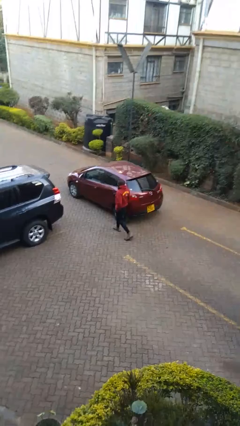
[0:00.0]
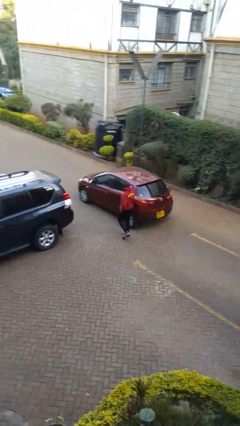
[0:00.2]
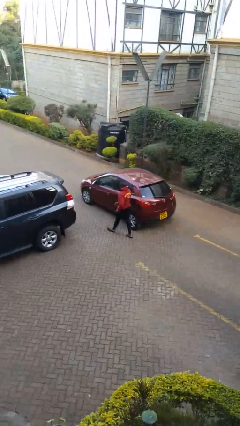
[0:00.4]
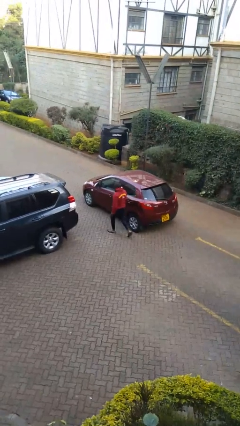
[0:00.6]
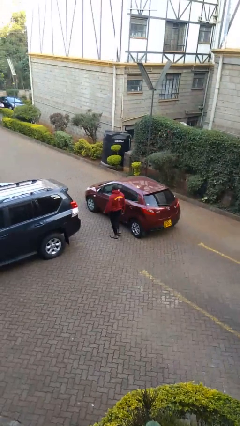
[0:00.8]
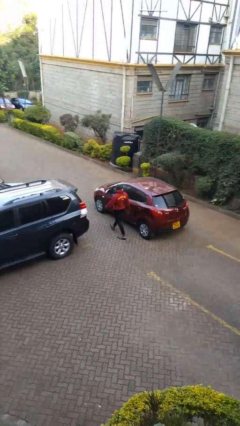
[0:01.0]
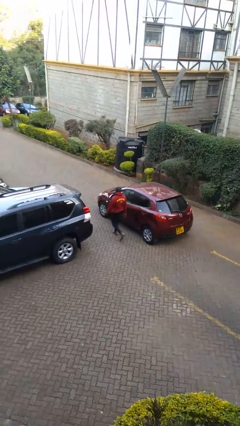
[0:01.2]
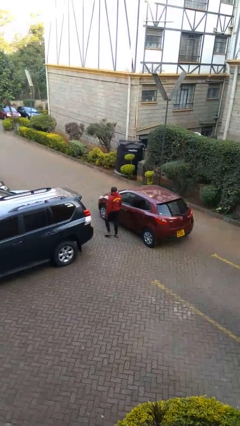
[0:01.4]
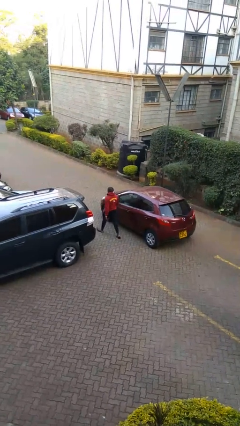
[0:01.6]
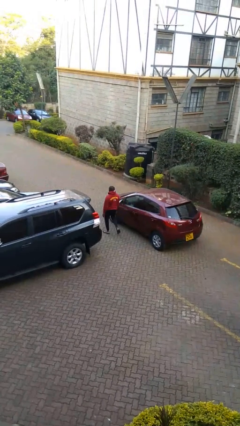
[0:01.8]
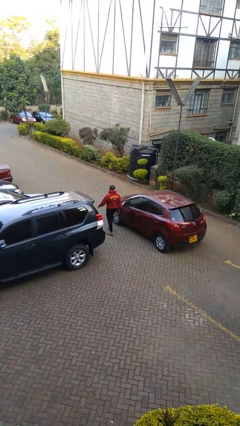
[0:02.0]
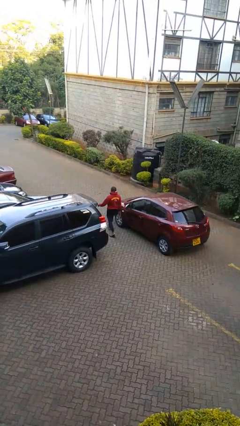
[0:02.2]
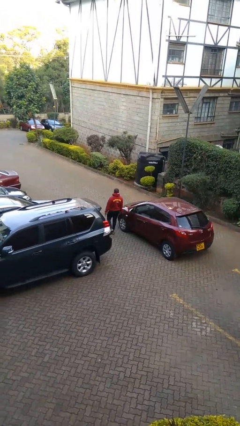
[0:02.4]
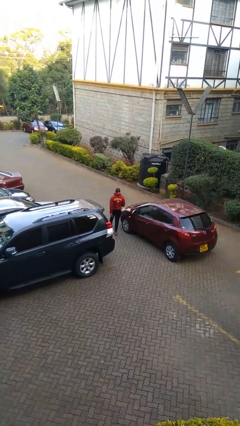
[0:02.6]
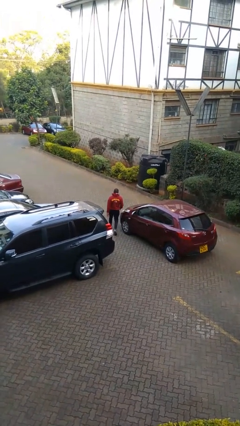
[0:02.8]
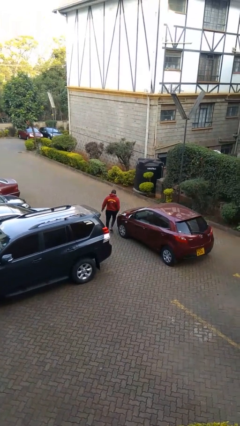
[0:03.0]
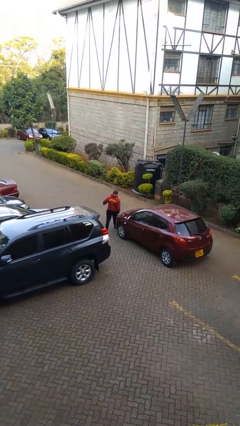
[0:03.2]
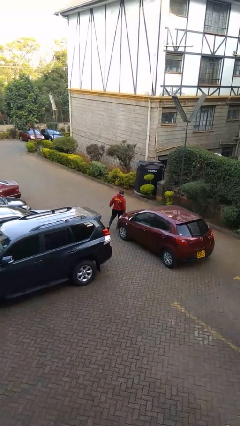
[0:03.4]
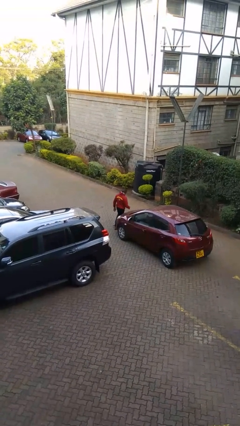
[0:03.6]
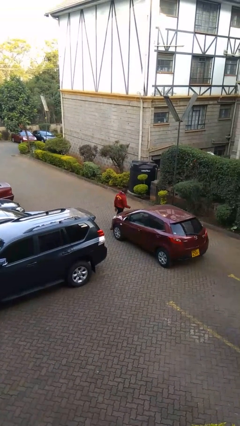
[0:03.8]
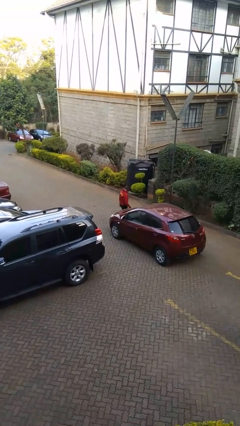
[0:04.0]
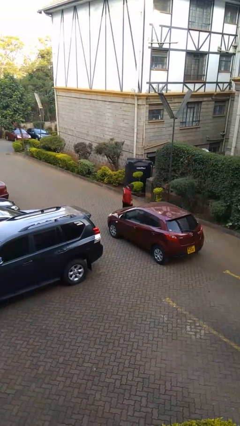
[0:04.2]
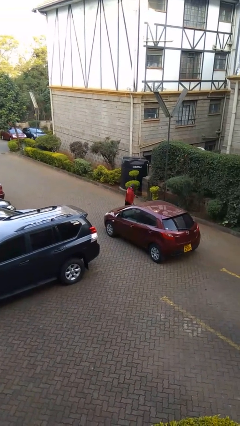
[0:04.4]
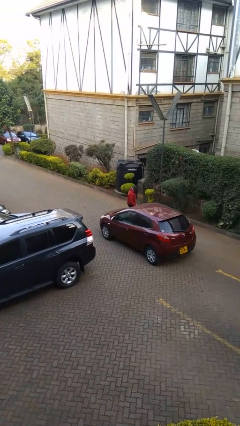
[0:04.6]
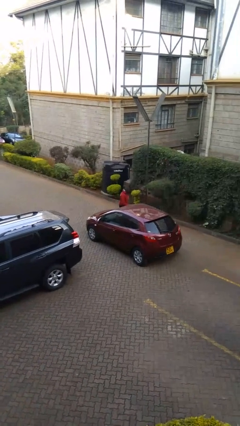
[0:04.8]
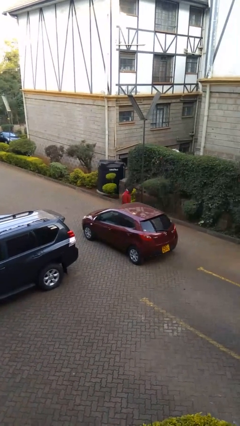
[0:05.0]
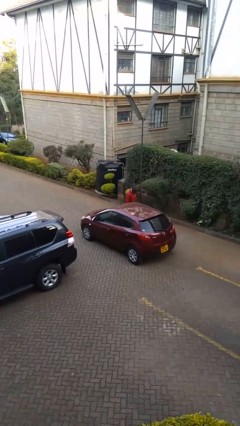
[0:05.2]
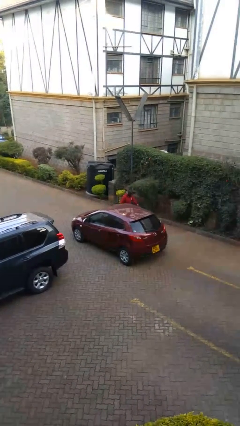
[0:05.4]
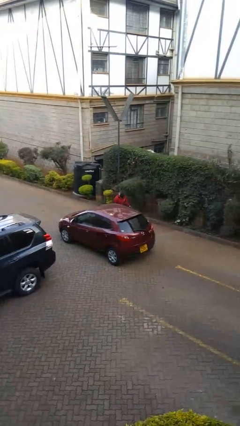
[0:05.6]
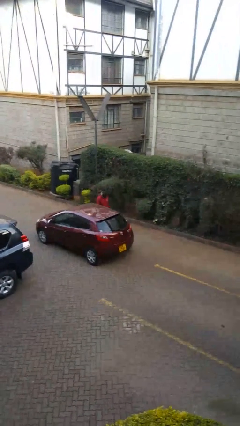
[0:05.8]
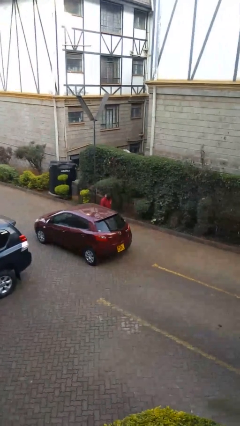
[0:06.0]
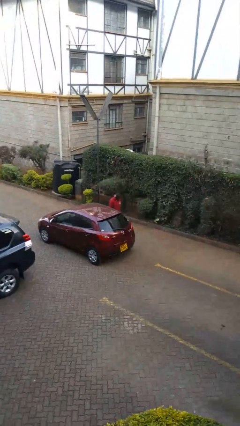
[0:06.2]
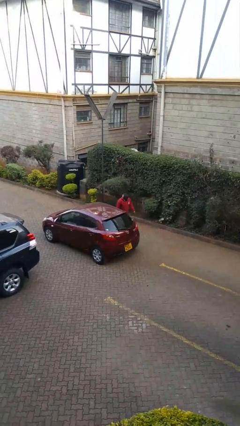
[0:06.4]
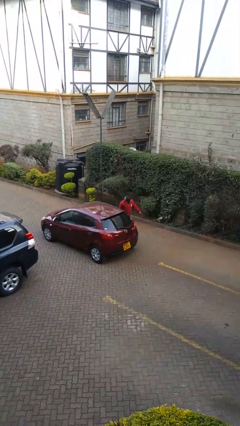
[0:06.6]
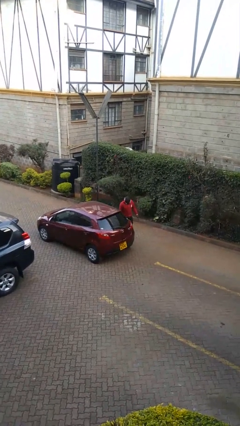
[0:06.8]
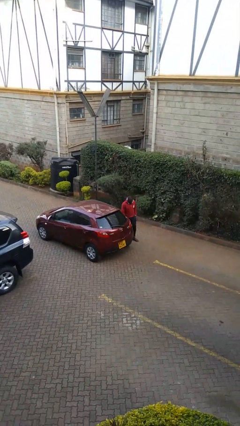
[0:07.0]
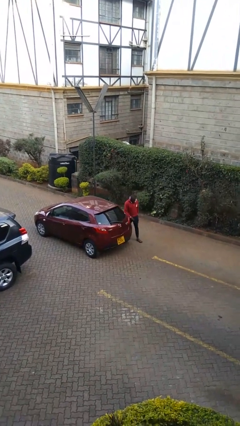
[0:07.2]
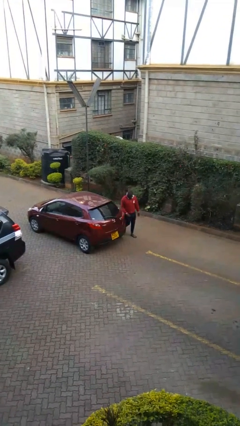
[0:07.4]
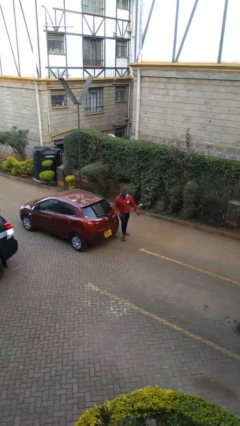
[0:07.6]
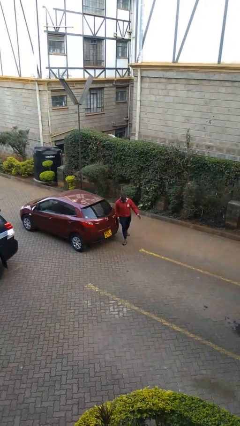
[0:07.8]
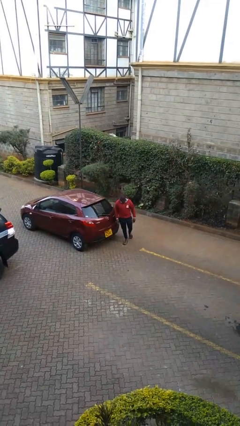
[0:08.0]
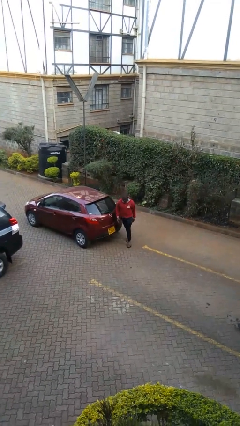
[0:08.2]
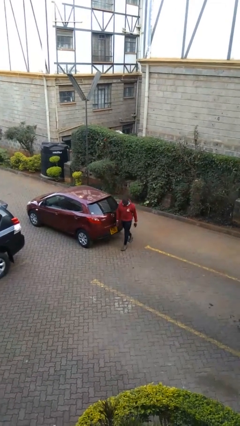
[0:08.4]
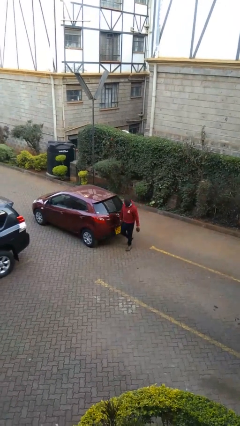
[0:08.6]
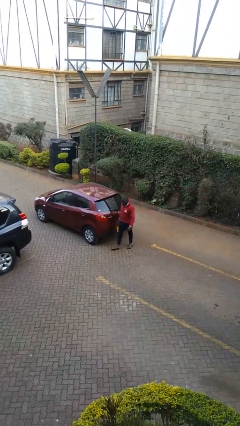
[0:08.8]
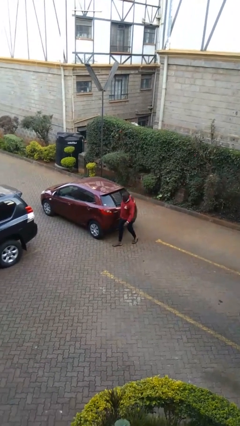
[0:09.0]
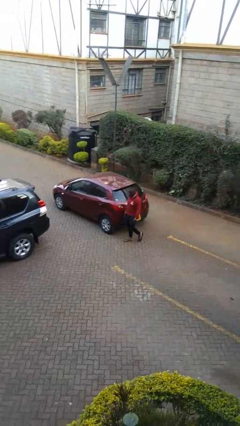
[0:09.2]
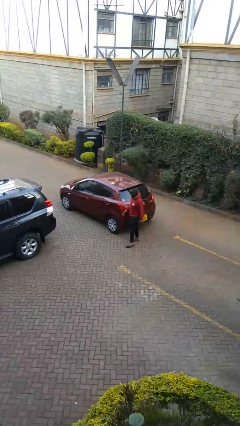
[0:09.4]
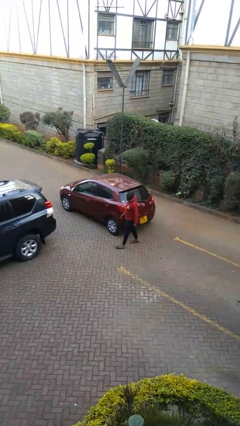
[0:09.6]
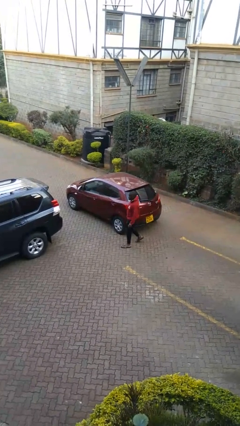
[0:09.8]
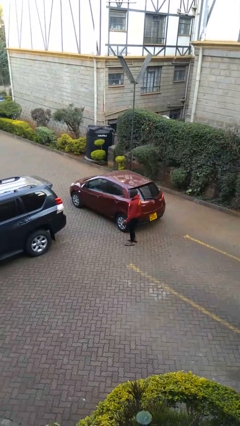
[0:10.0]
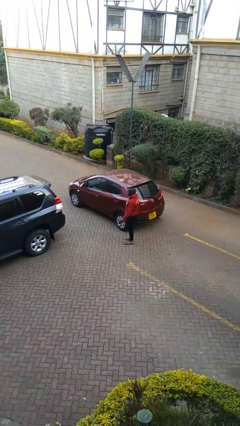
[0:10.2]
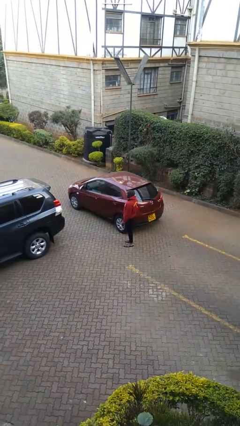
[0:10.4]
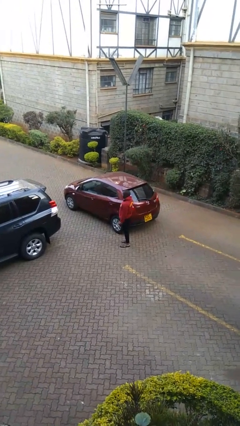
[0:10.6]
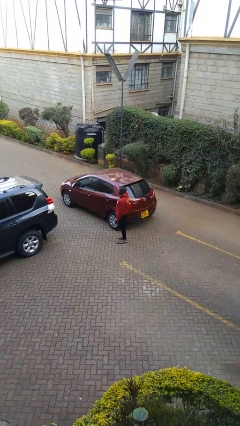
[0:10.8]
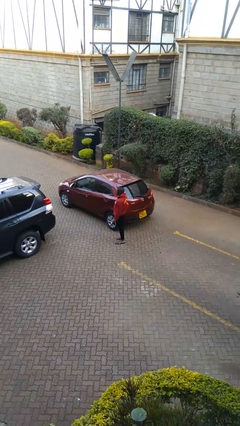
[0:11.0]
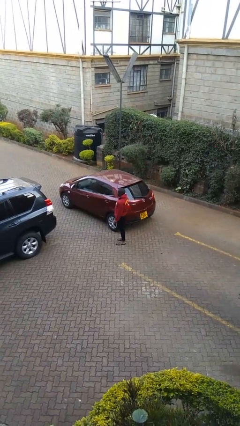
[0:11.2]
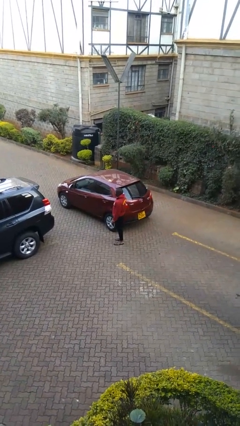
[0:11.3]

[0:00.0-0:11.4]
person walks around car

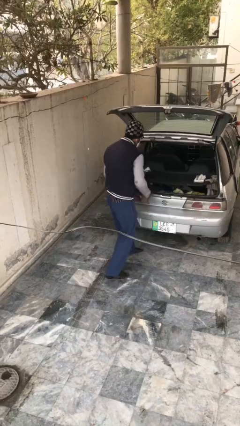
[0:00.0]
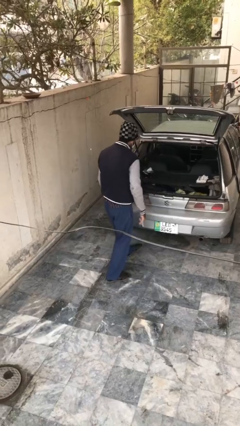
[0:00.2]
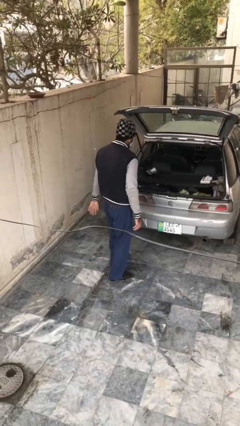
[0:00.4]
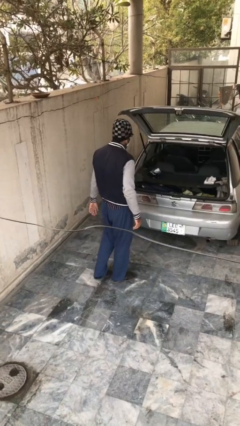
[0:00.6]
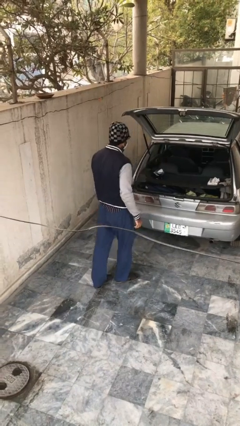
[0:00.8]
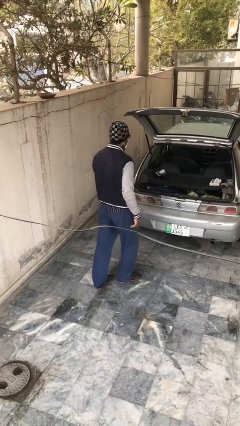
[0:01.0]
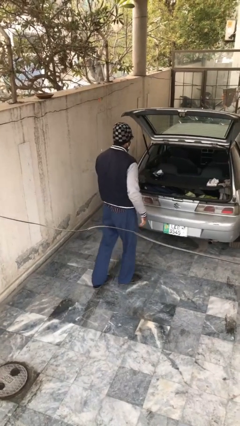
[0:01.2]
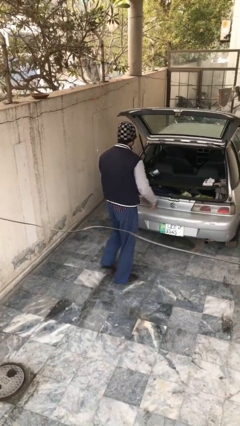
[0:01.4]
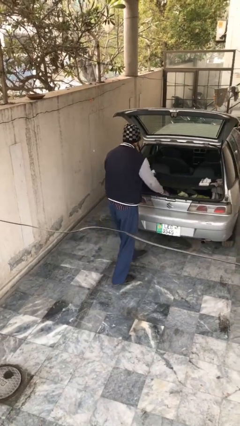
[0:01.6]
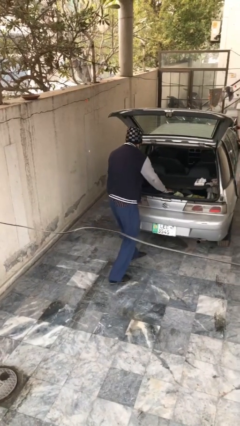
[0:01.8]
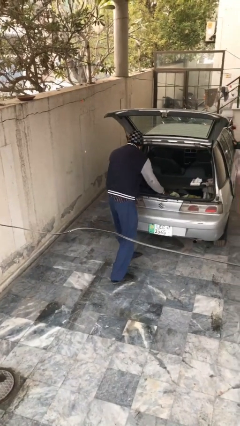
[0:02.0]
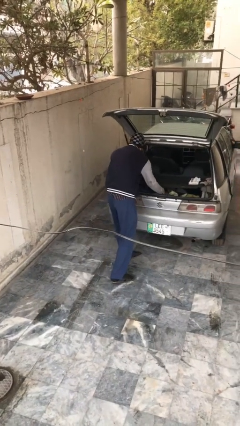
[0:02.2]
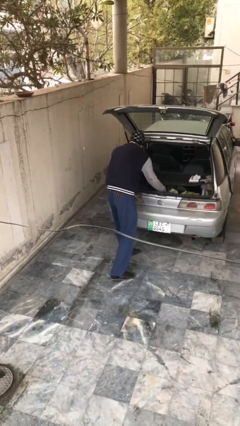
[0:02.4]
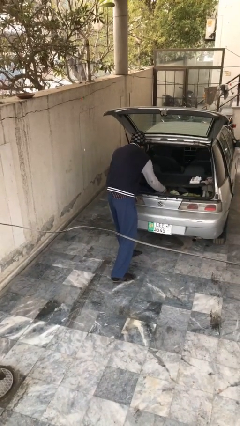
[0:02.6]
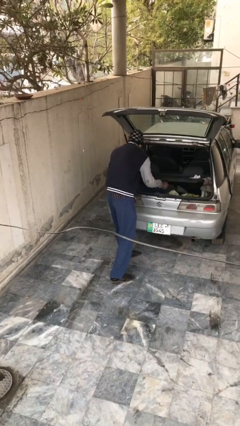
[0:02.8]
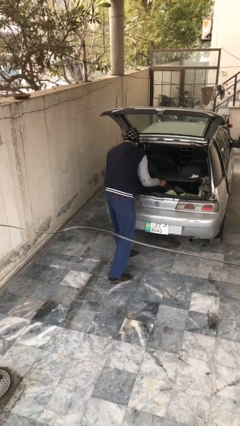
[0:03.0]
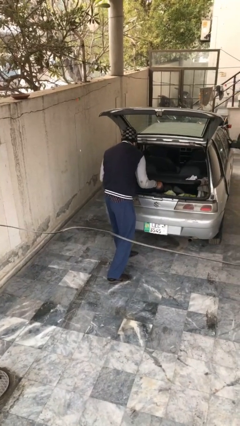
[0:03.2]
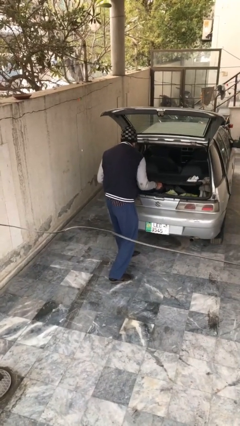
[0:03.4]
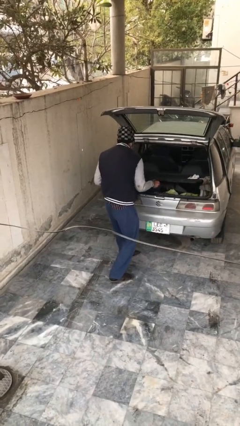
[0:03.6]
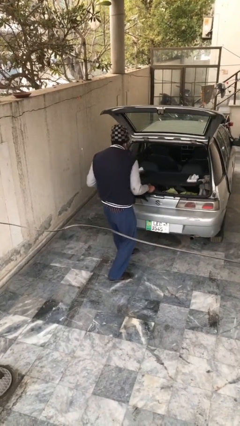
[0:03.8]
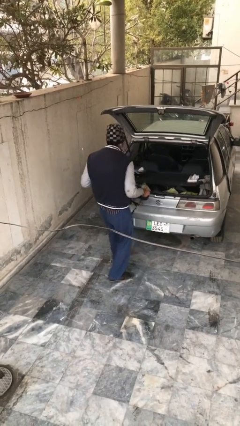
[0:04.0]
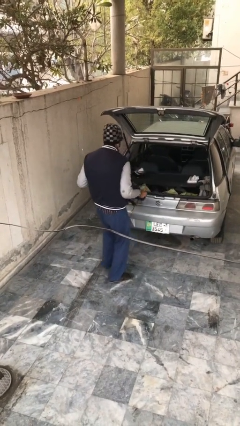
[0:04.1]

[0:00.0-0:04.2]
person unloads car

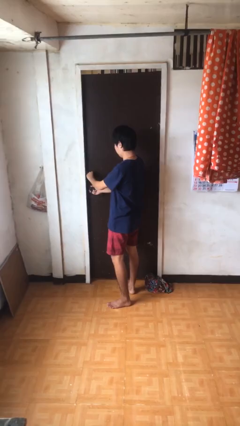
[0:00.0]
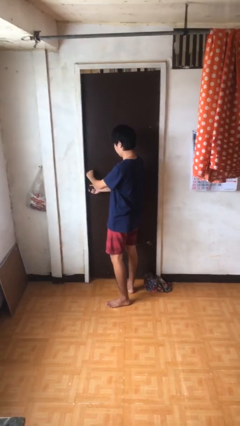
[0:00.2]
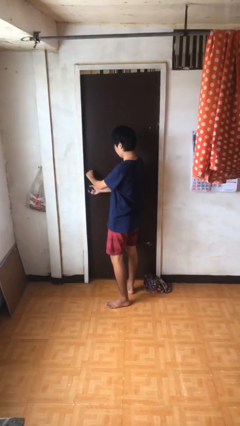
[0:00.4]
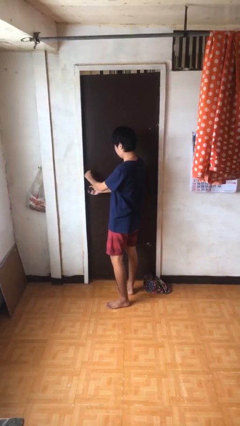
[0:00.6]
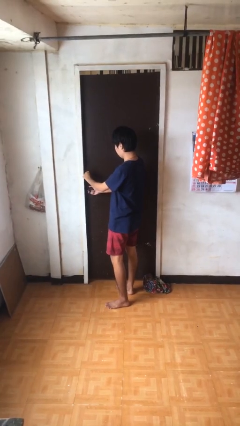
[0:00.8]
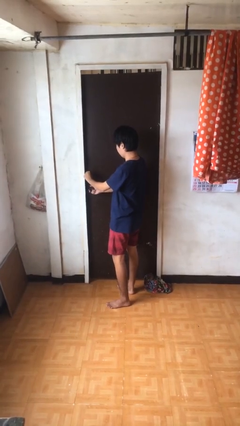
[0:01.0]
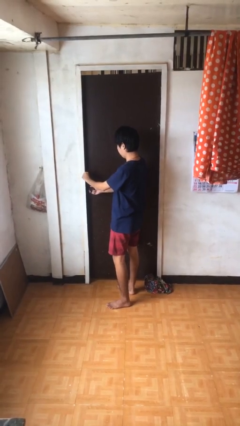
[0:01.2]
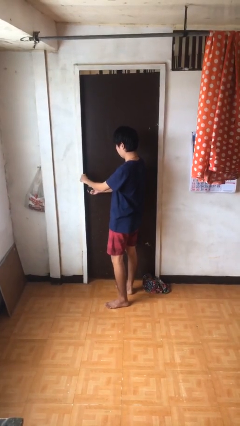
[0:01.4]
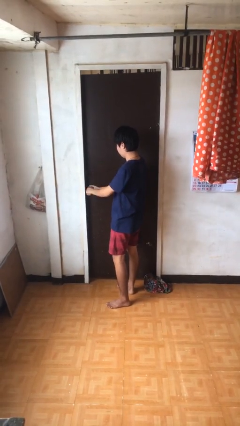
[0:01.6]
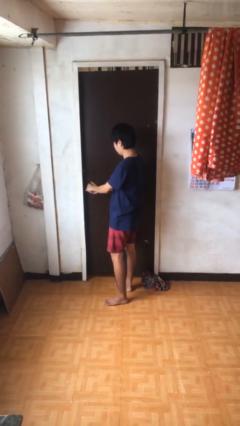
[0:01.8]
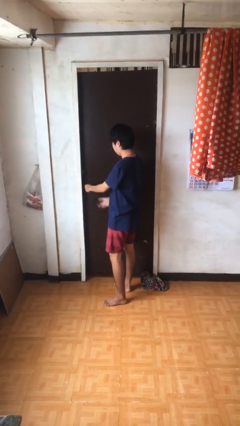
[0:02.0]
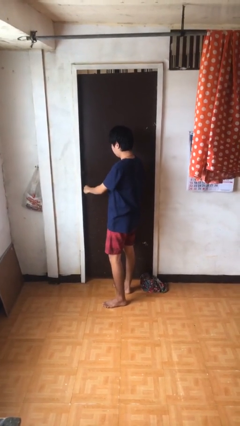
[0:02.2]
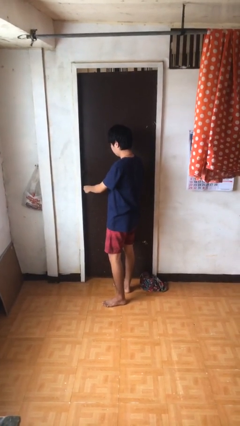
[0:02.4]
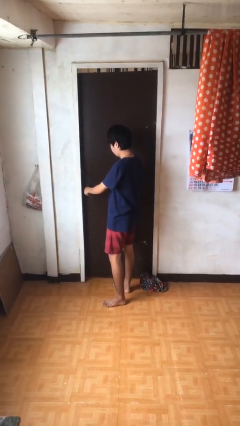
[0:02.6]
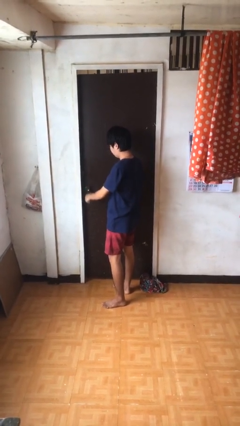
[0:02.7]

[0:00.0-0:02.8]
person locks door with keys
